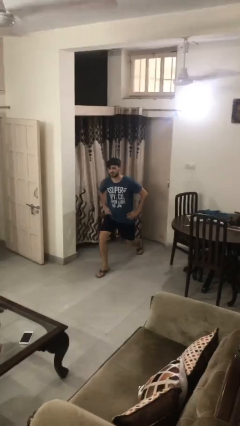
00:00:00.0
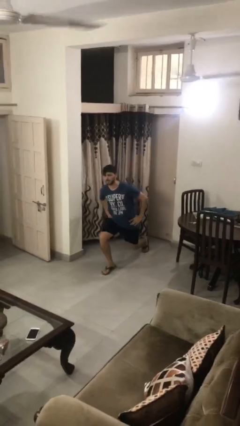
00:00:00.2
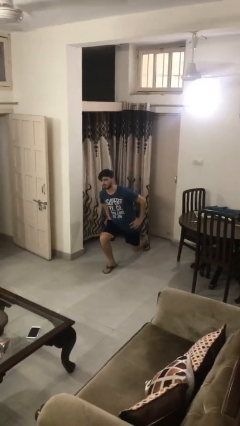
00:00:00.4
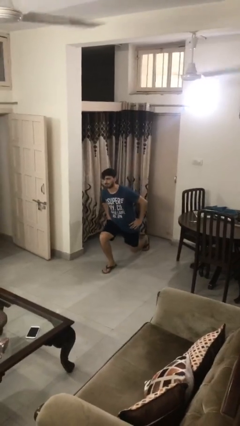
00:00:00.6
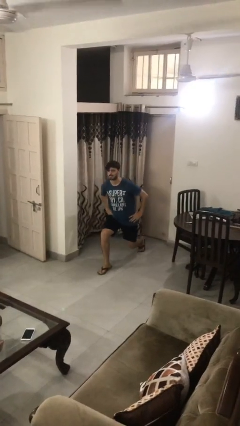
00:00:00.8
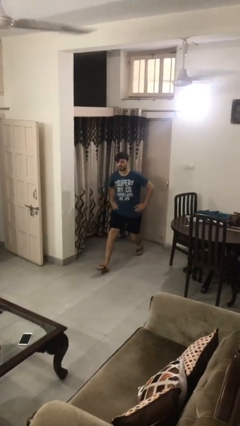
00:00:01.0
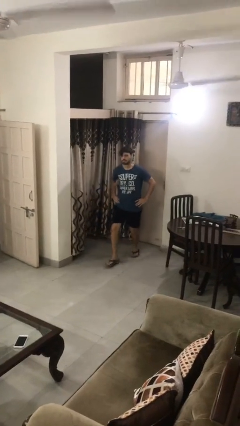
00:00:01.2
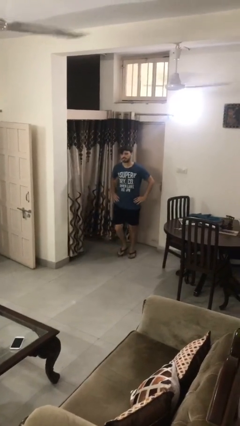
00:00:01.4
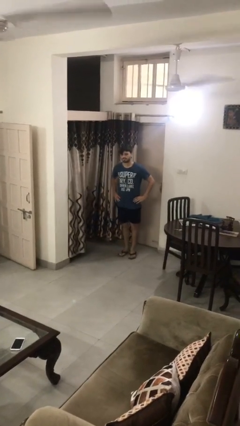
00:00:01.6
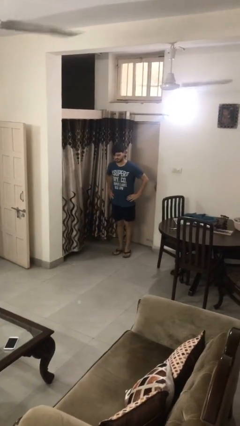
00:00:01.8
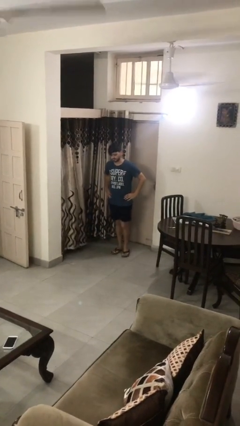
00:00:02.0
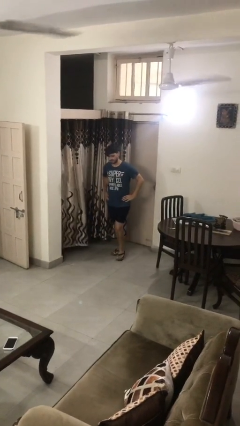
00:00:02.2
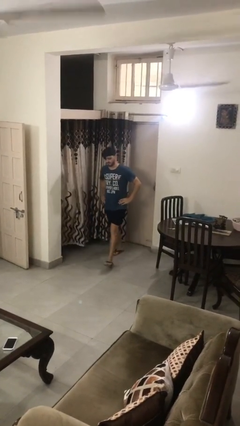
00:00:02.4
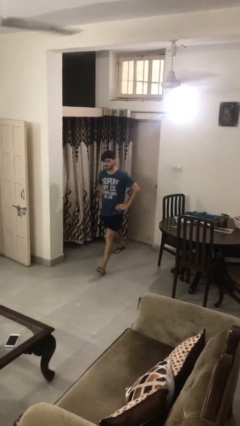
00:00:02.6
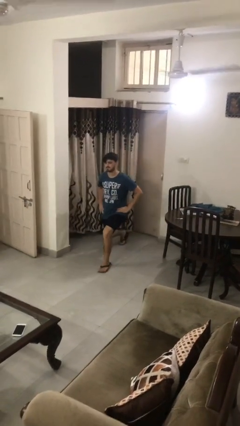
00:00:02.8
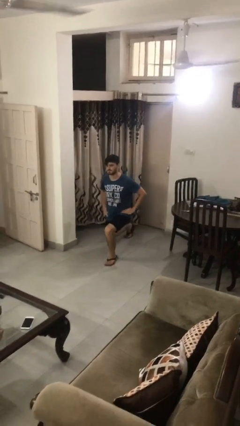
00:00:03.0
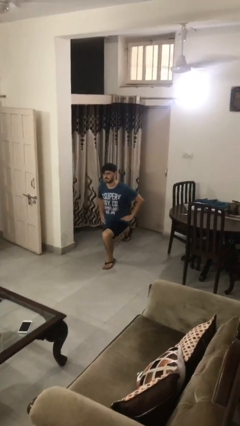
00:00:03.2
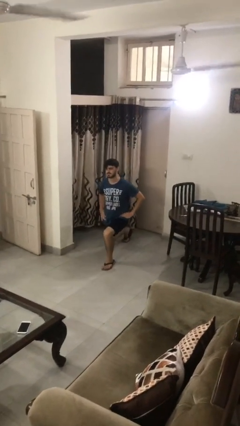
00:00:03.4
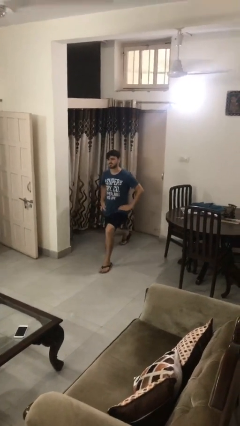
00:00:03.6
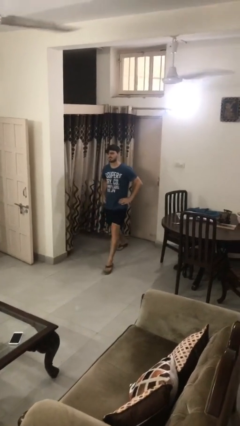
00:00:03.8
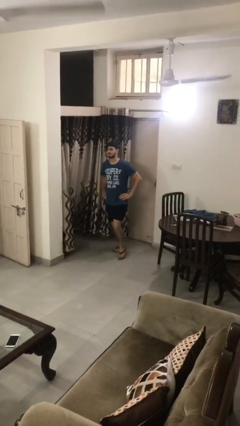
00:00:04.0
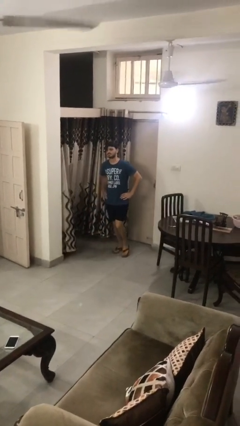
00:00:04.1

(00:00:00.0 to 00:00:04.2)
person exercises with lunges

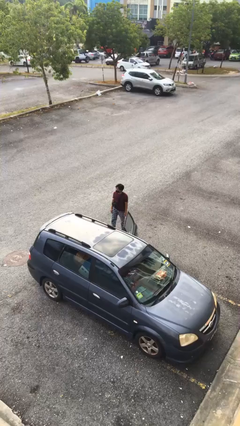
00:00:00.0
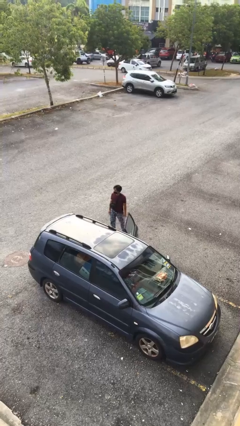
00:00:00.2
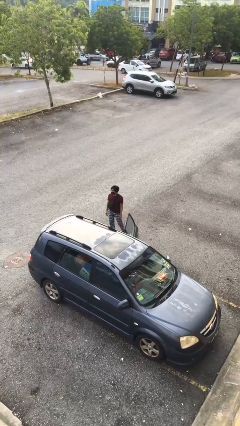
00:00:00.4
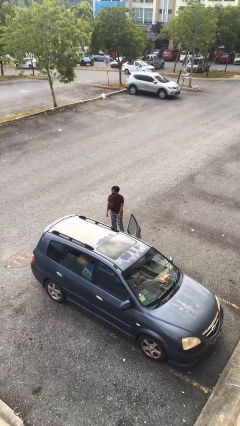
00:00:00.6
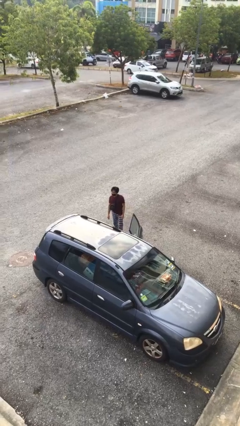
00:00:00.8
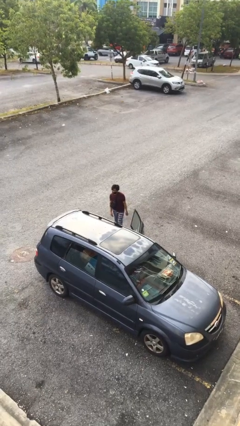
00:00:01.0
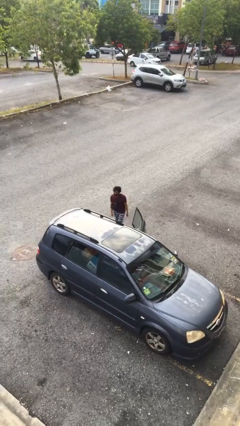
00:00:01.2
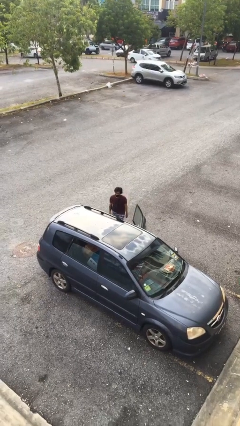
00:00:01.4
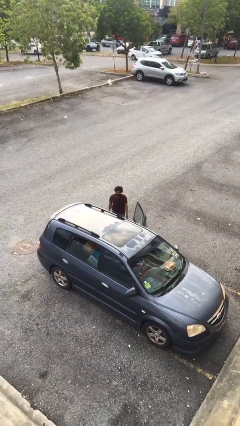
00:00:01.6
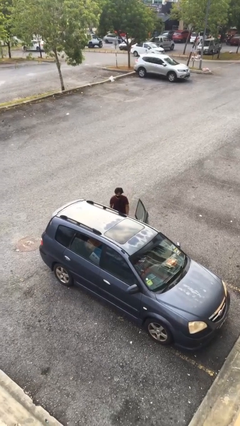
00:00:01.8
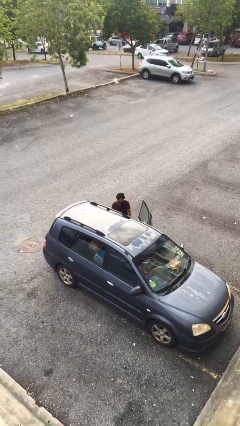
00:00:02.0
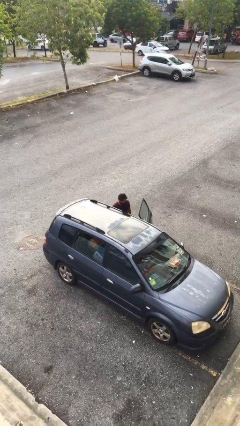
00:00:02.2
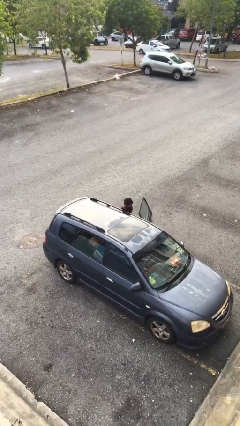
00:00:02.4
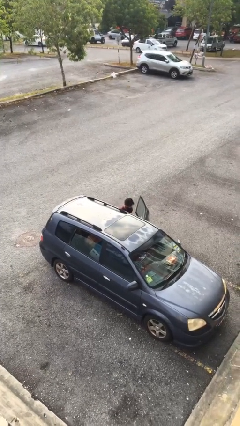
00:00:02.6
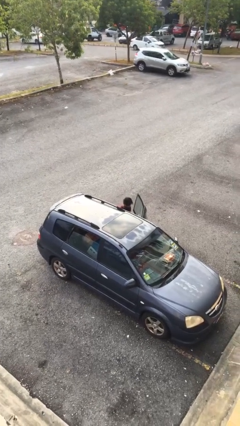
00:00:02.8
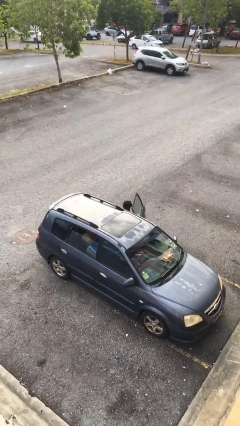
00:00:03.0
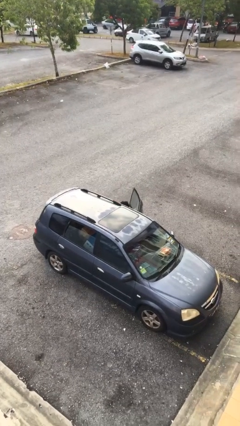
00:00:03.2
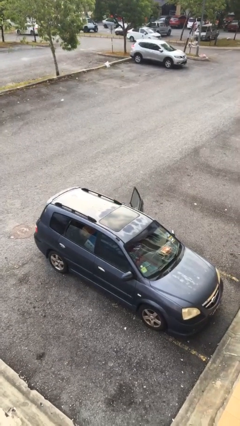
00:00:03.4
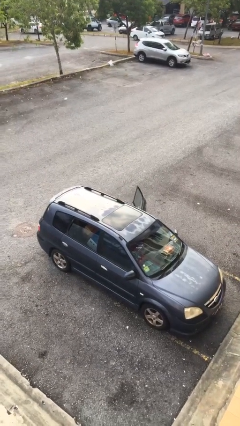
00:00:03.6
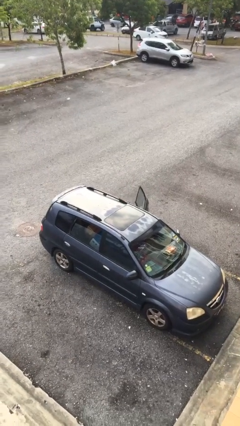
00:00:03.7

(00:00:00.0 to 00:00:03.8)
person enters car

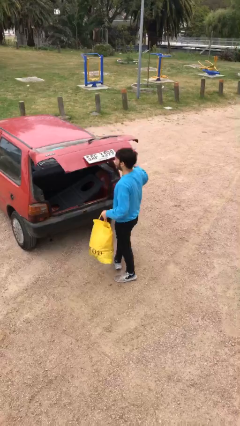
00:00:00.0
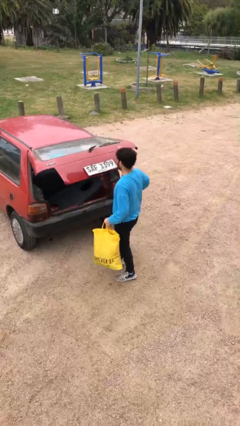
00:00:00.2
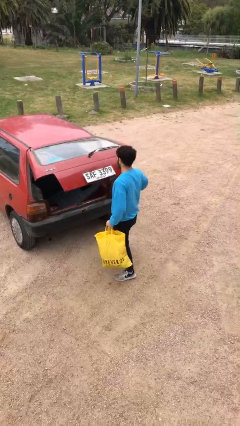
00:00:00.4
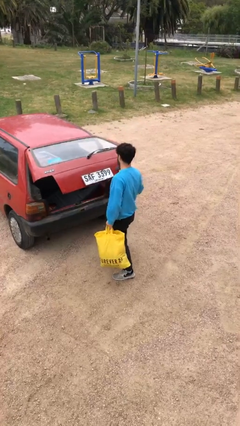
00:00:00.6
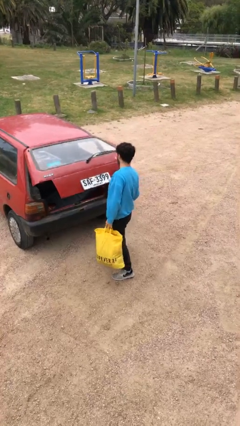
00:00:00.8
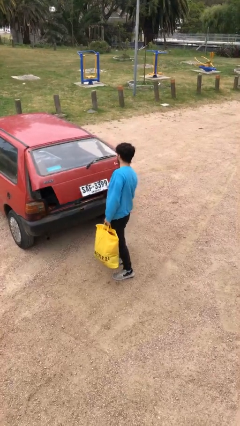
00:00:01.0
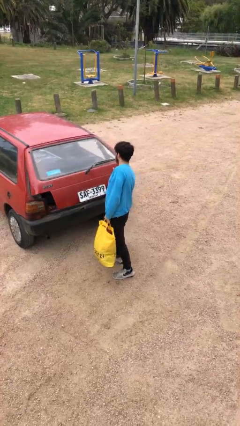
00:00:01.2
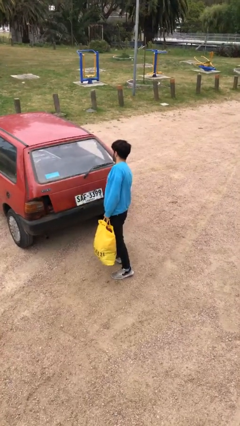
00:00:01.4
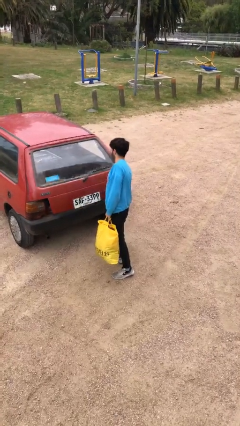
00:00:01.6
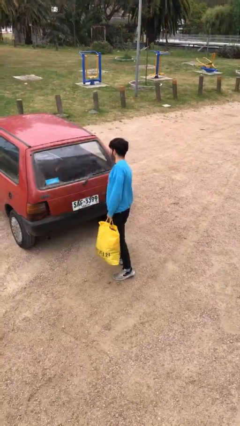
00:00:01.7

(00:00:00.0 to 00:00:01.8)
person closes car trunk

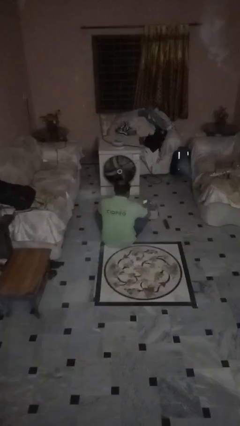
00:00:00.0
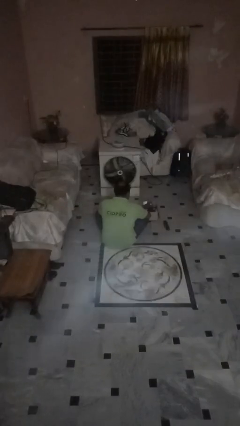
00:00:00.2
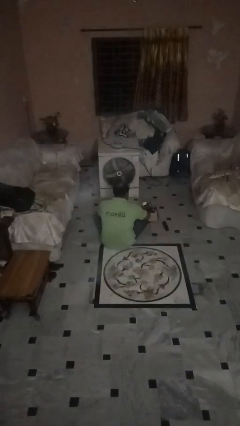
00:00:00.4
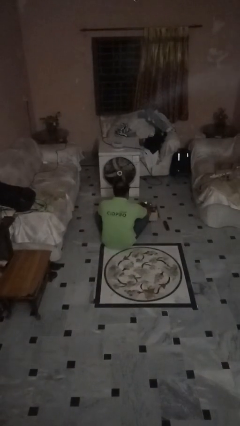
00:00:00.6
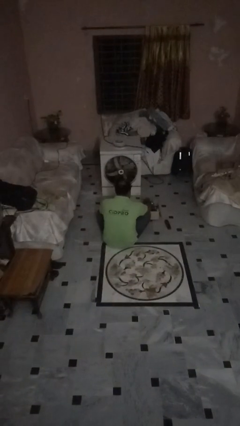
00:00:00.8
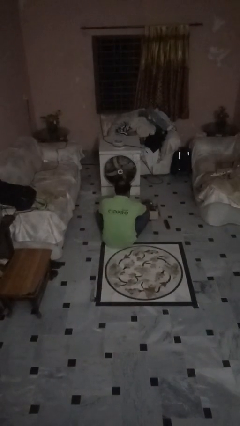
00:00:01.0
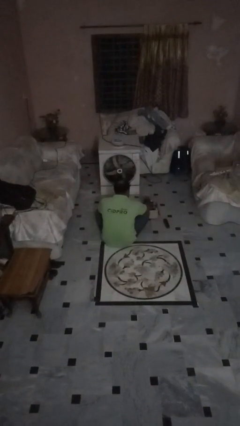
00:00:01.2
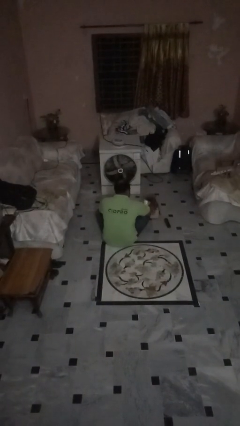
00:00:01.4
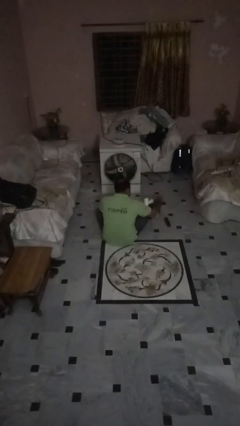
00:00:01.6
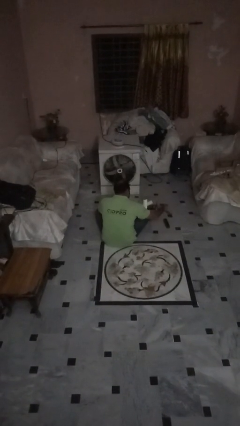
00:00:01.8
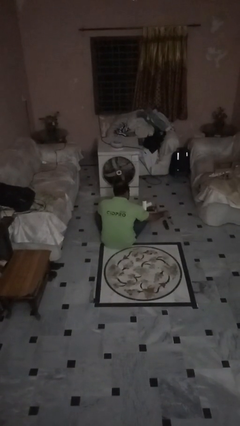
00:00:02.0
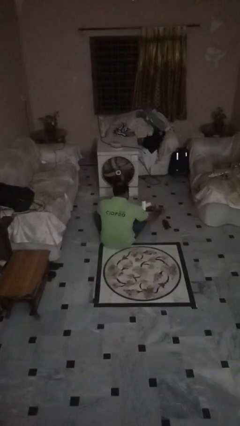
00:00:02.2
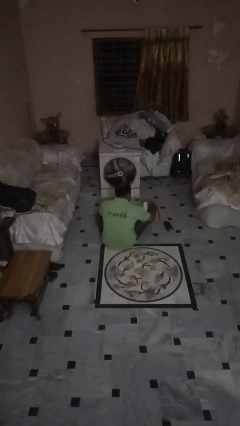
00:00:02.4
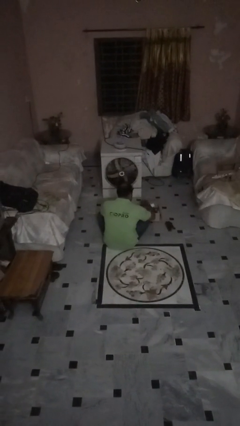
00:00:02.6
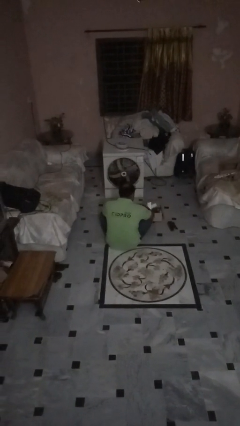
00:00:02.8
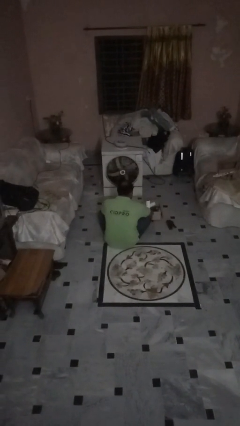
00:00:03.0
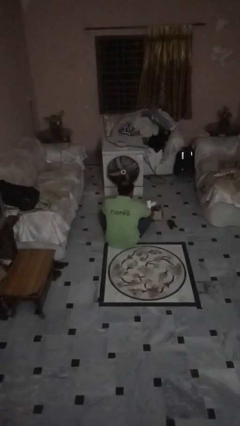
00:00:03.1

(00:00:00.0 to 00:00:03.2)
person unloads box onto floor

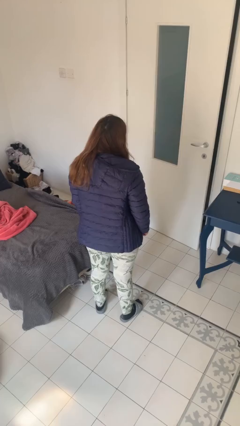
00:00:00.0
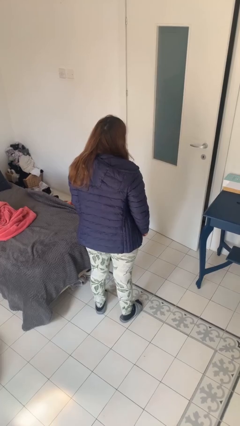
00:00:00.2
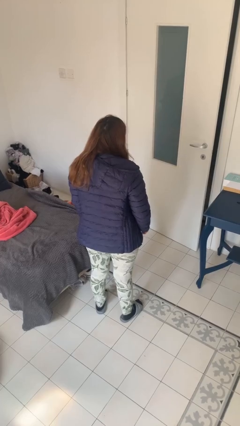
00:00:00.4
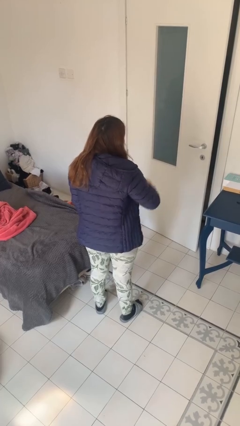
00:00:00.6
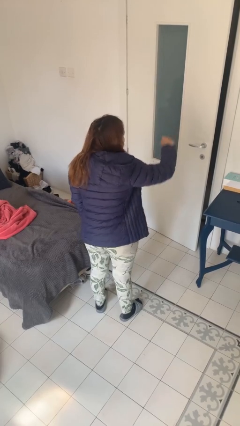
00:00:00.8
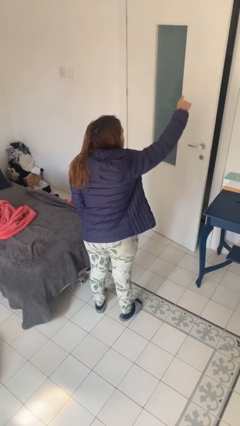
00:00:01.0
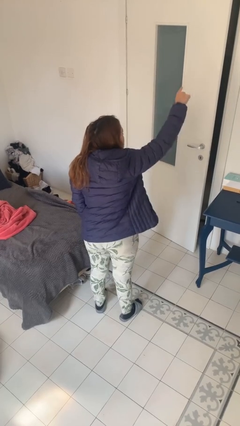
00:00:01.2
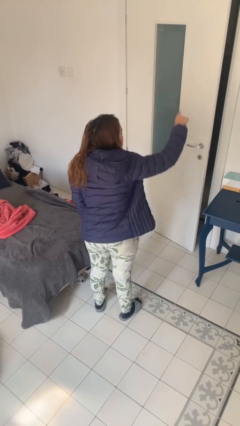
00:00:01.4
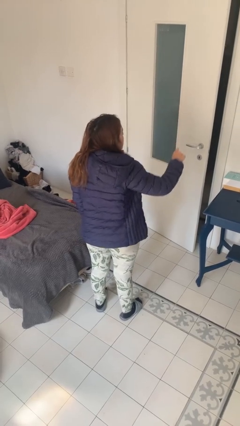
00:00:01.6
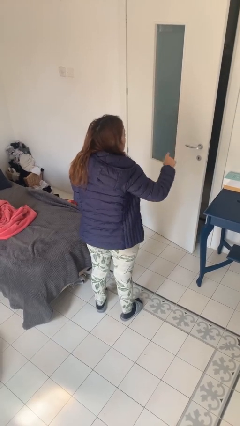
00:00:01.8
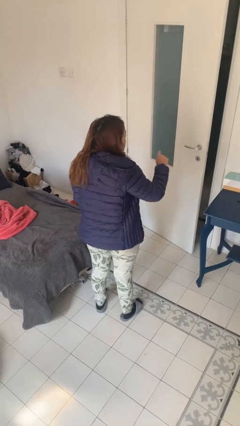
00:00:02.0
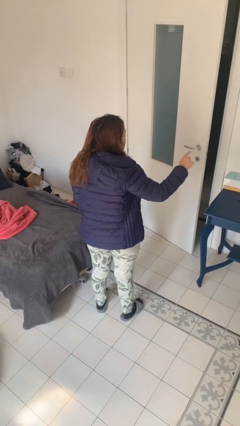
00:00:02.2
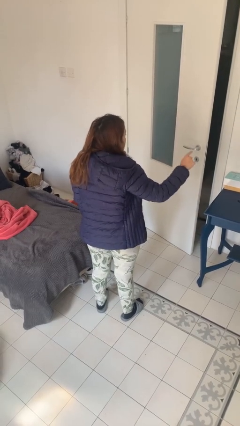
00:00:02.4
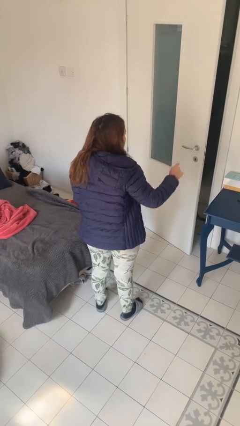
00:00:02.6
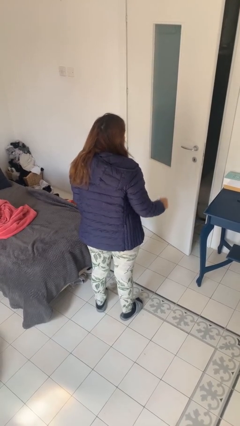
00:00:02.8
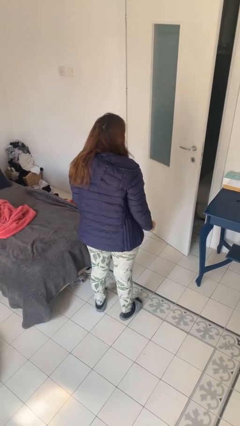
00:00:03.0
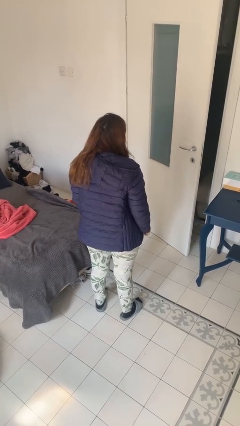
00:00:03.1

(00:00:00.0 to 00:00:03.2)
person gestures number one

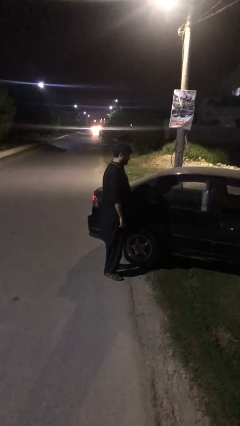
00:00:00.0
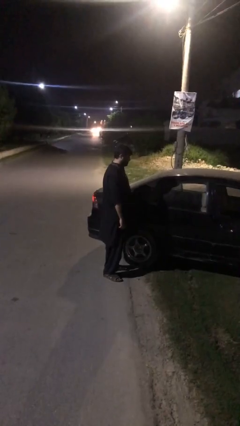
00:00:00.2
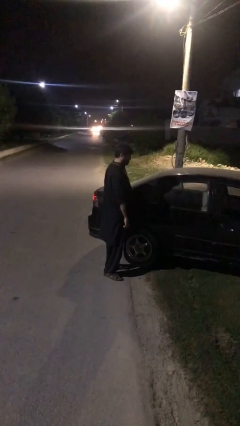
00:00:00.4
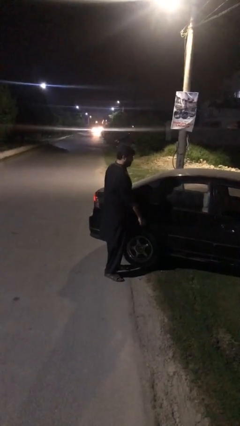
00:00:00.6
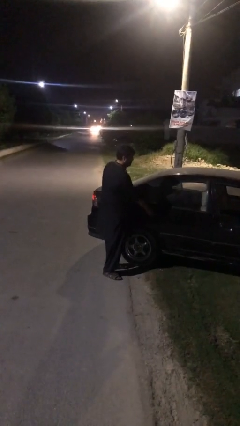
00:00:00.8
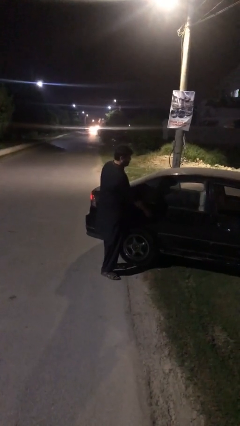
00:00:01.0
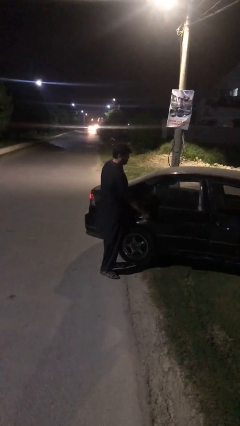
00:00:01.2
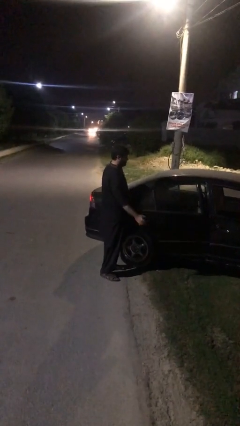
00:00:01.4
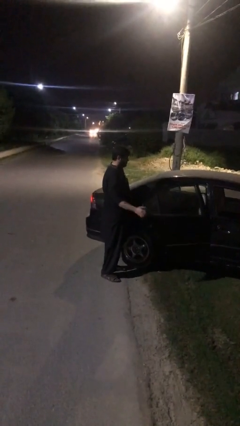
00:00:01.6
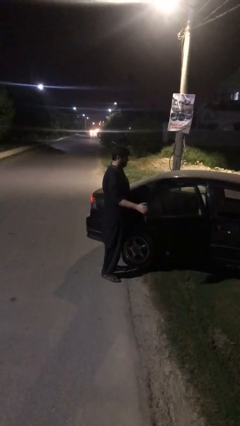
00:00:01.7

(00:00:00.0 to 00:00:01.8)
person opens car door
